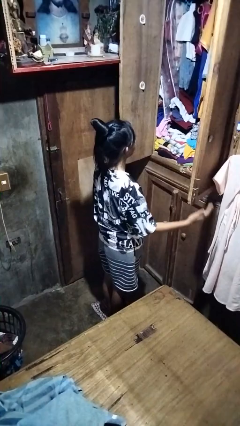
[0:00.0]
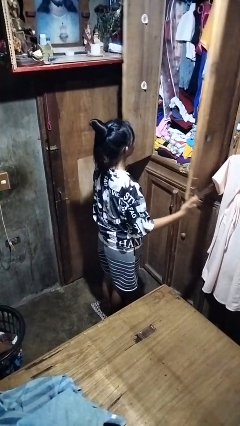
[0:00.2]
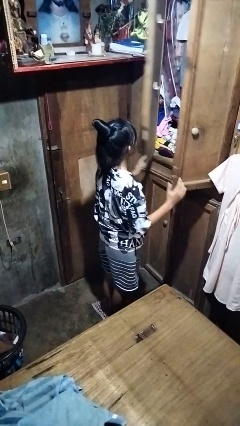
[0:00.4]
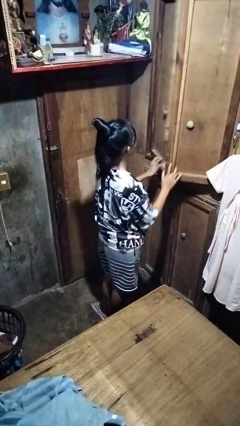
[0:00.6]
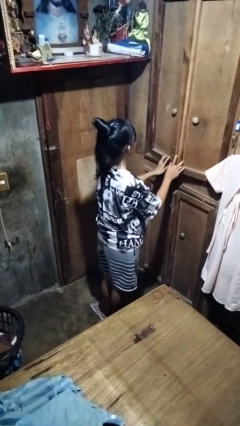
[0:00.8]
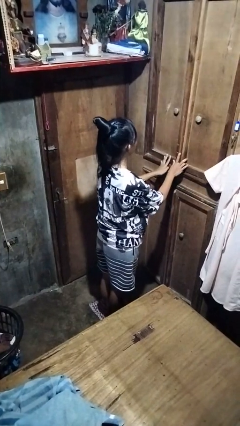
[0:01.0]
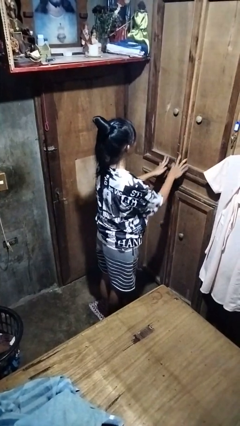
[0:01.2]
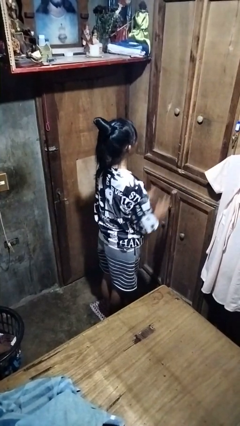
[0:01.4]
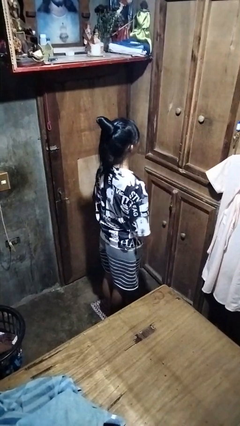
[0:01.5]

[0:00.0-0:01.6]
person closes closet door

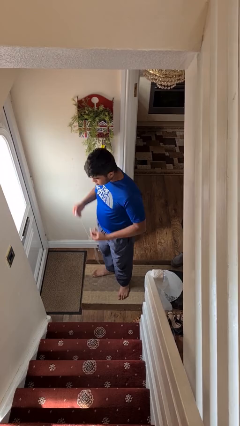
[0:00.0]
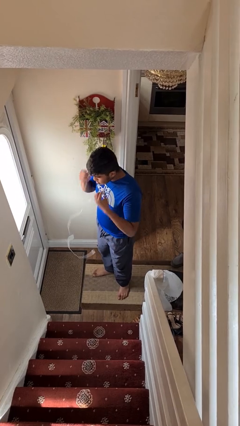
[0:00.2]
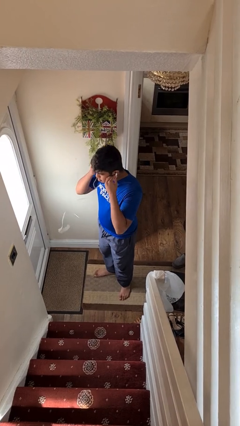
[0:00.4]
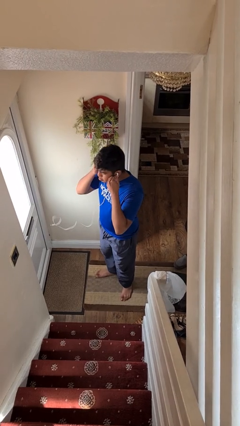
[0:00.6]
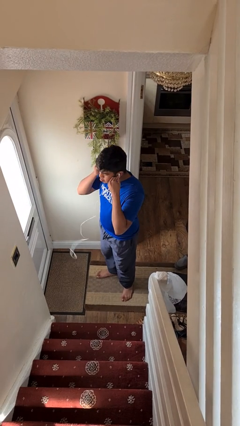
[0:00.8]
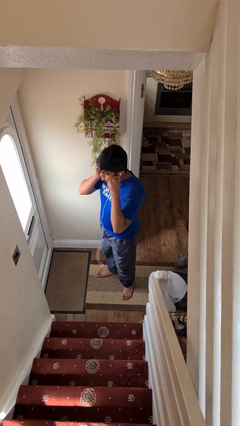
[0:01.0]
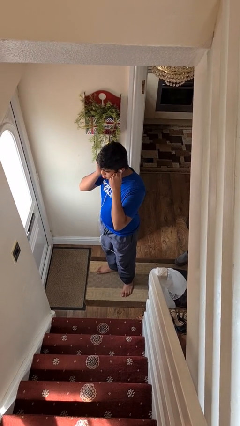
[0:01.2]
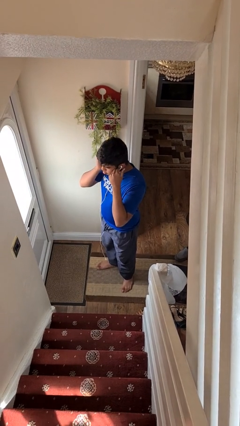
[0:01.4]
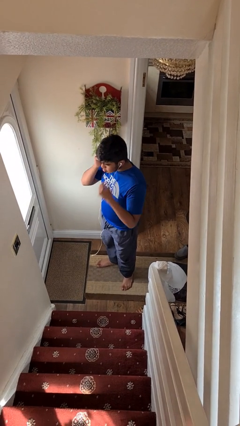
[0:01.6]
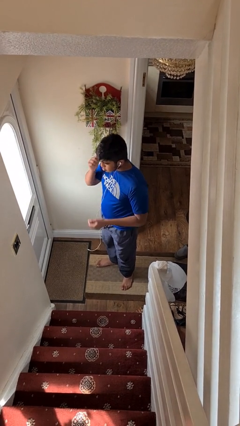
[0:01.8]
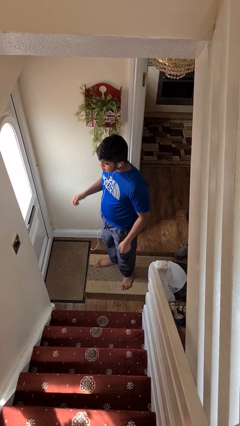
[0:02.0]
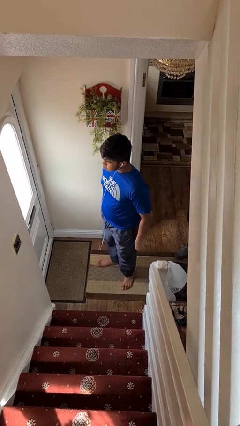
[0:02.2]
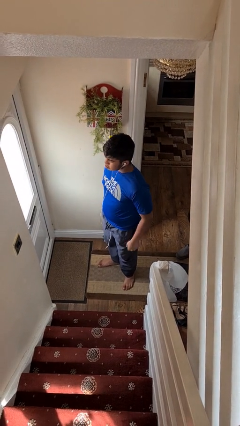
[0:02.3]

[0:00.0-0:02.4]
person puts on headphones

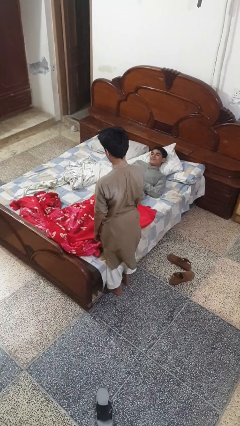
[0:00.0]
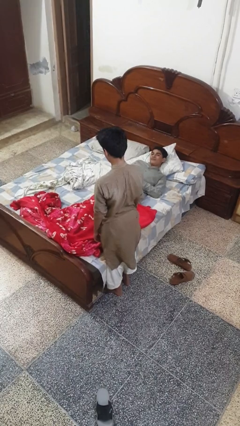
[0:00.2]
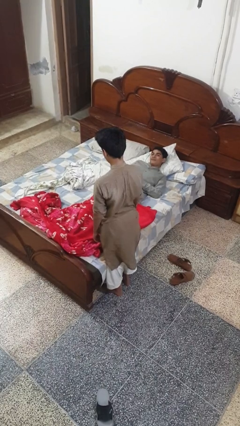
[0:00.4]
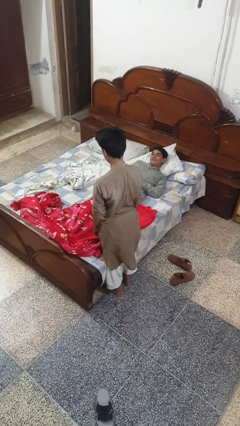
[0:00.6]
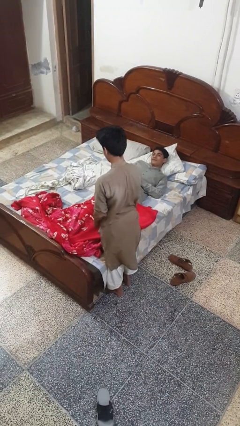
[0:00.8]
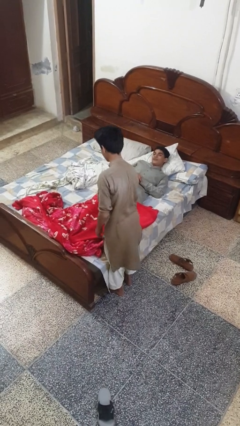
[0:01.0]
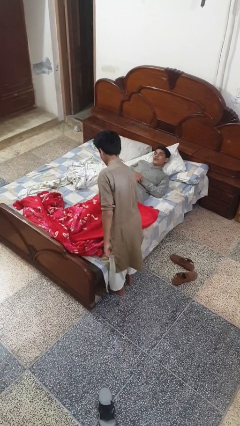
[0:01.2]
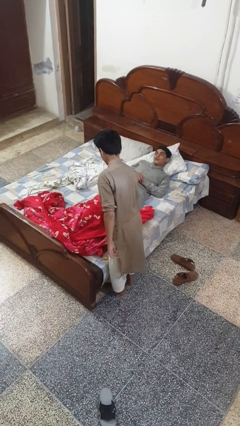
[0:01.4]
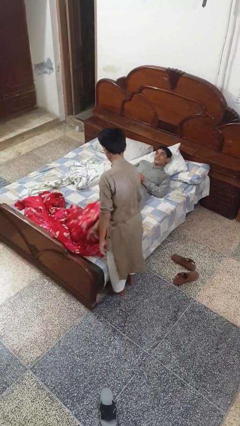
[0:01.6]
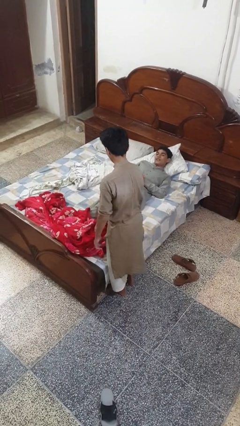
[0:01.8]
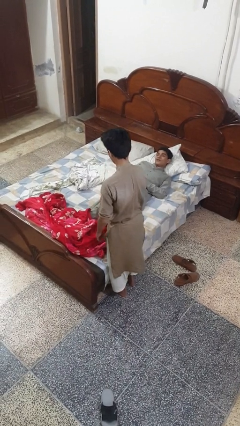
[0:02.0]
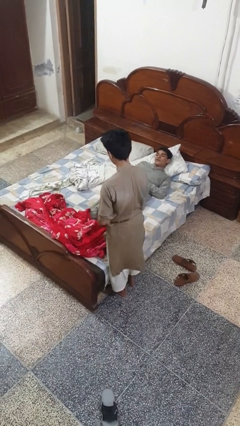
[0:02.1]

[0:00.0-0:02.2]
person uncovers friend with blanket

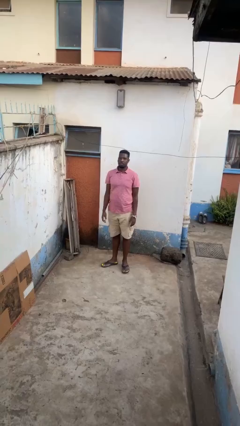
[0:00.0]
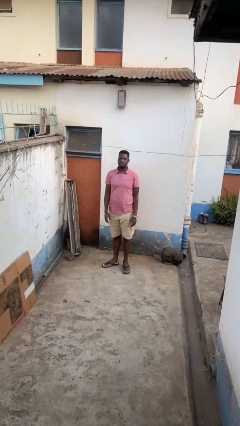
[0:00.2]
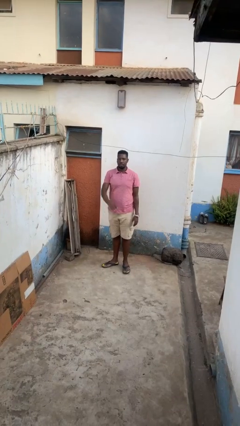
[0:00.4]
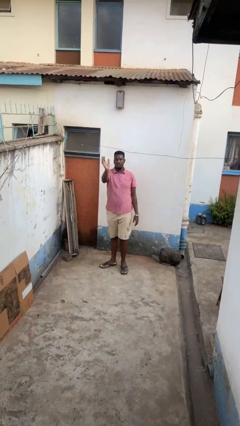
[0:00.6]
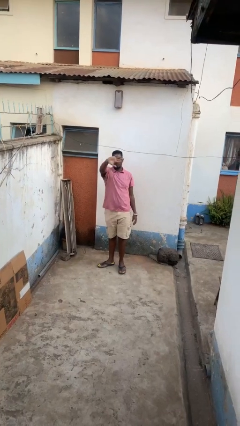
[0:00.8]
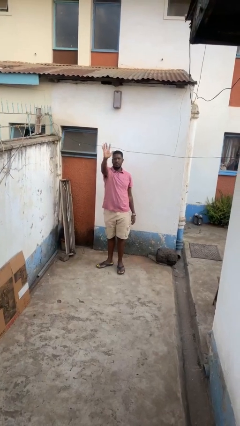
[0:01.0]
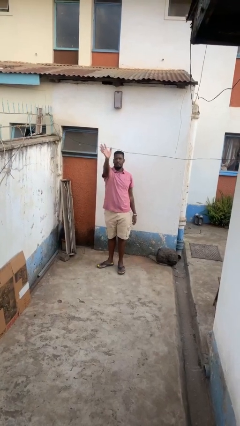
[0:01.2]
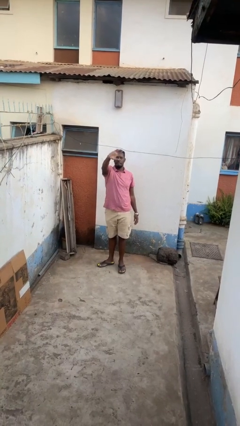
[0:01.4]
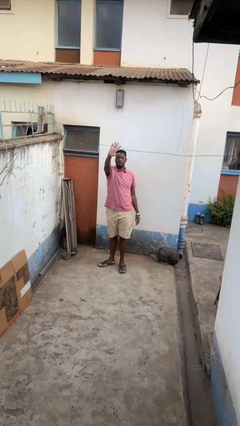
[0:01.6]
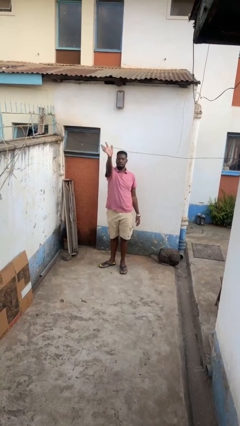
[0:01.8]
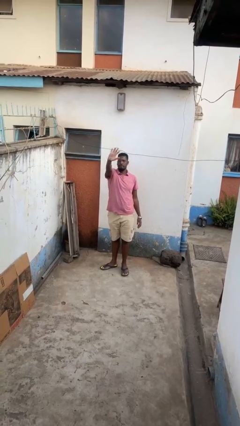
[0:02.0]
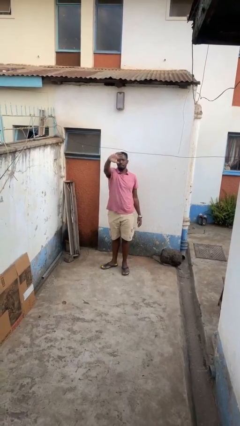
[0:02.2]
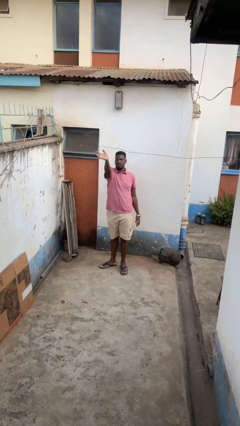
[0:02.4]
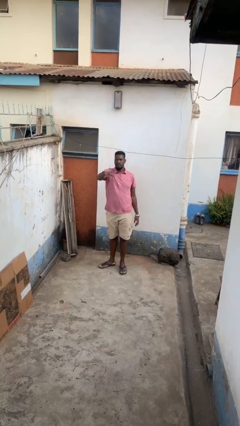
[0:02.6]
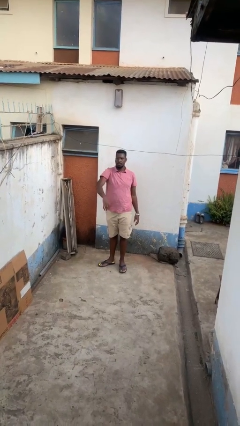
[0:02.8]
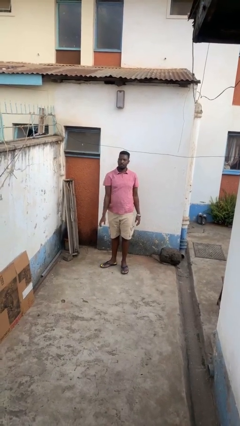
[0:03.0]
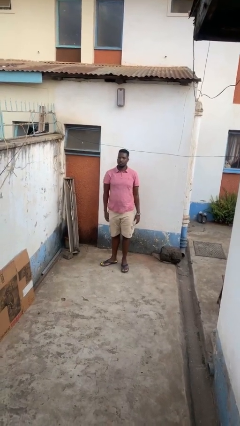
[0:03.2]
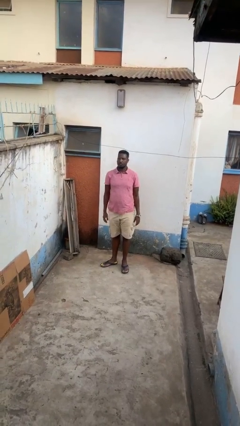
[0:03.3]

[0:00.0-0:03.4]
person waves at person

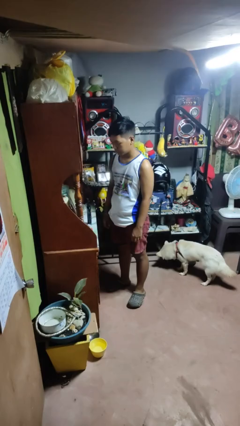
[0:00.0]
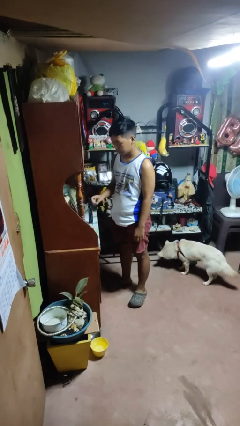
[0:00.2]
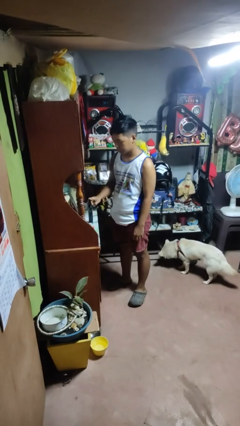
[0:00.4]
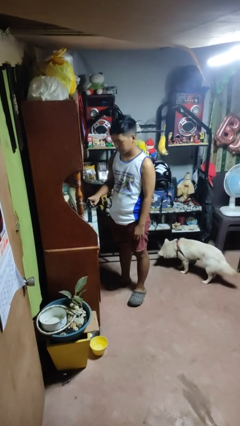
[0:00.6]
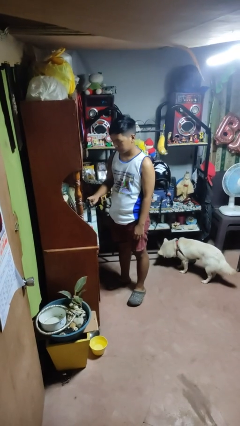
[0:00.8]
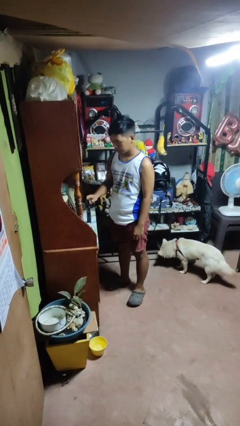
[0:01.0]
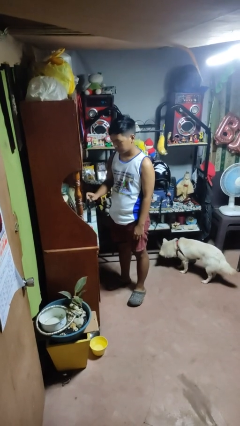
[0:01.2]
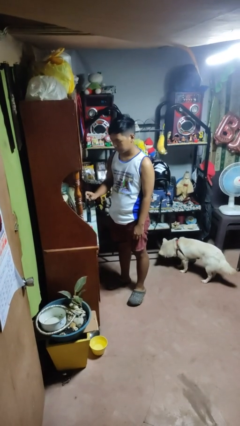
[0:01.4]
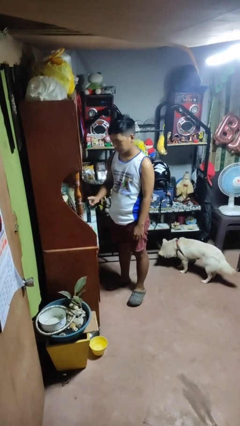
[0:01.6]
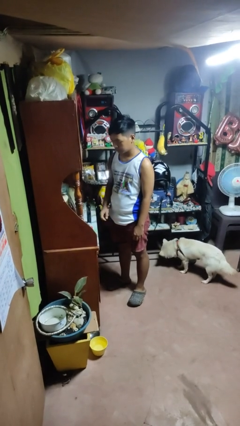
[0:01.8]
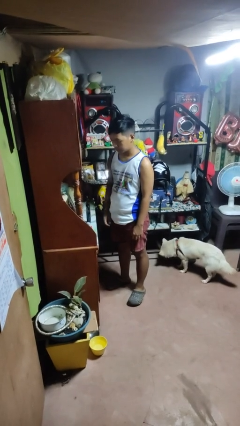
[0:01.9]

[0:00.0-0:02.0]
person taps object with finger

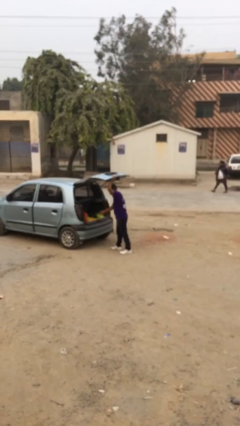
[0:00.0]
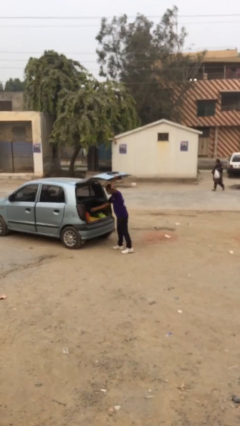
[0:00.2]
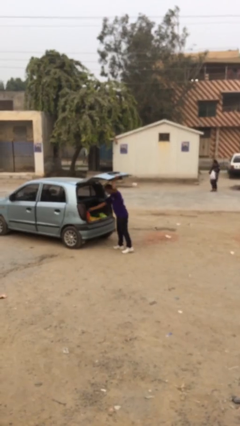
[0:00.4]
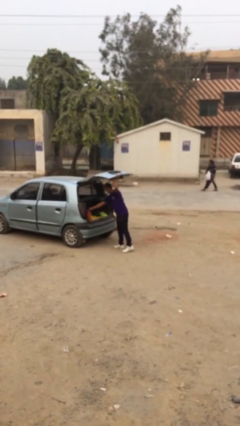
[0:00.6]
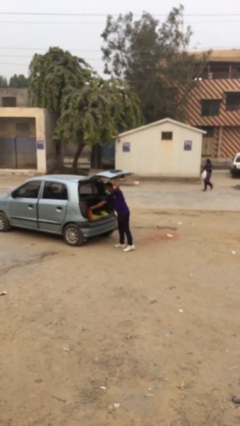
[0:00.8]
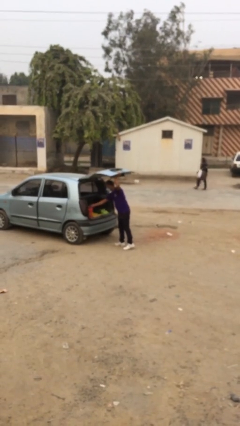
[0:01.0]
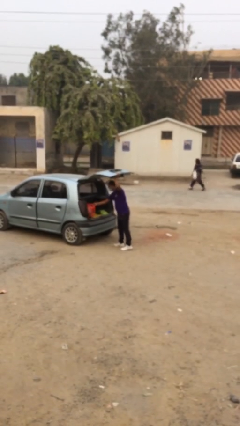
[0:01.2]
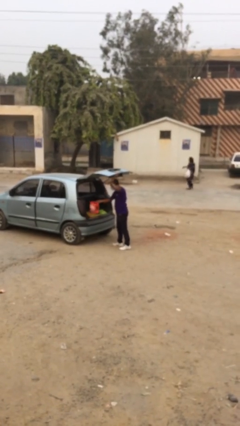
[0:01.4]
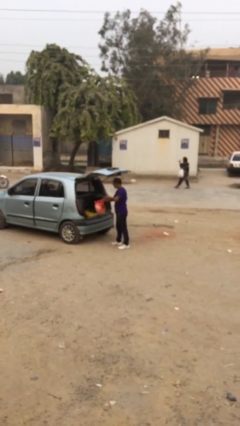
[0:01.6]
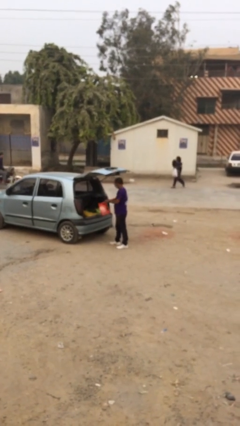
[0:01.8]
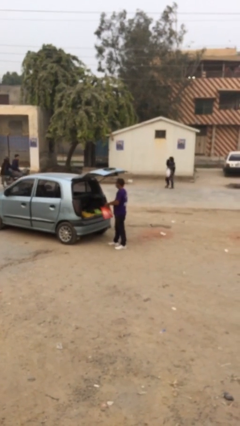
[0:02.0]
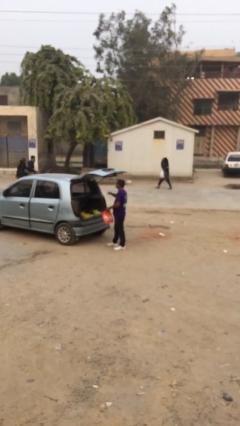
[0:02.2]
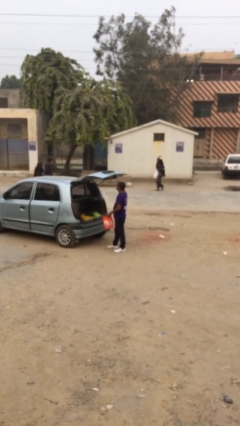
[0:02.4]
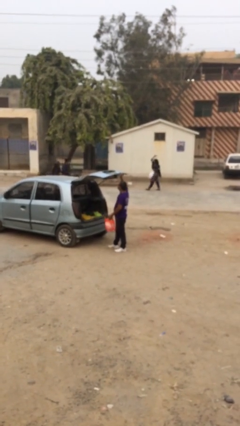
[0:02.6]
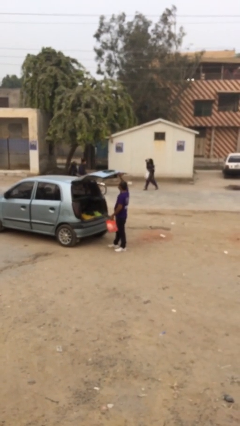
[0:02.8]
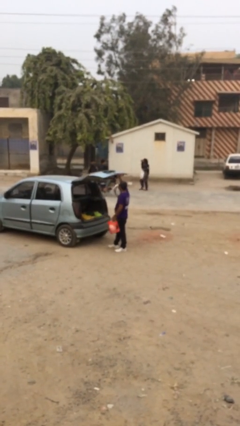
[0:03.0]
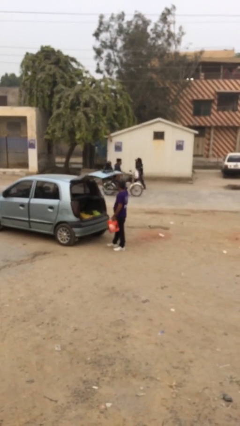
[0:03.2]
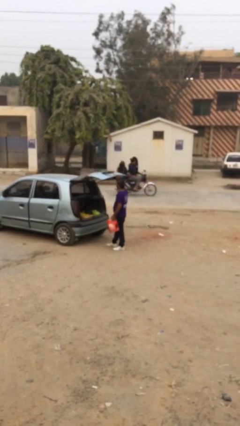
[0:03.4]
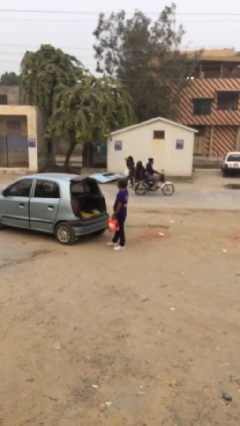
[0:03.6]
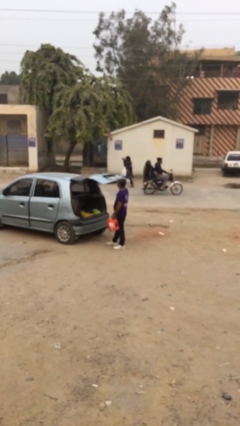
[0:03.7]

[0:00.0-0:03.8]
person unloads car

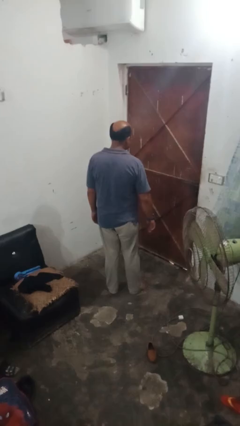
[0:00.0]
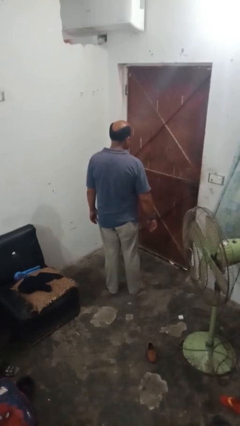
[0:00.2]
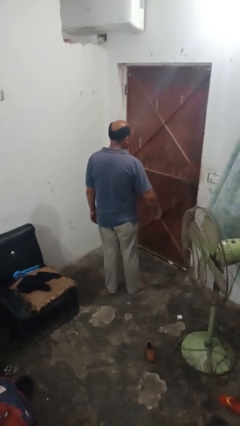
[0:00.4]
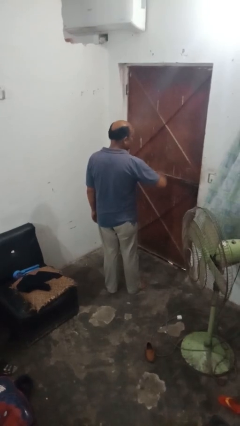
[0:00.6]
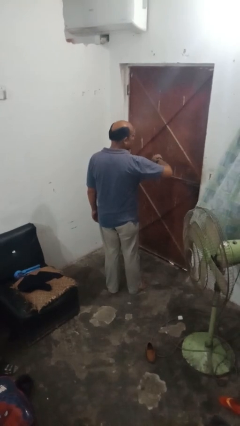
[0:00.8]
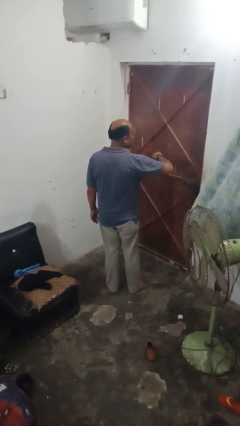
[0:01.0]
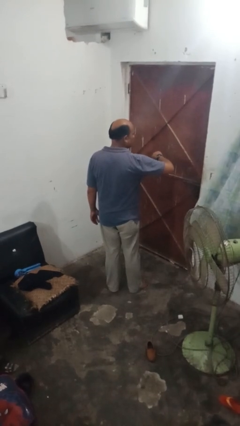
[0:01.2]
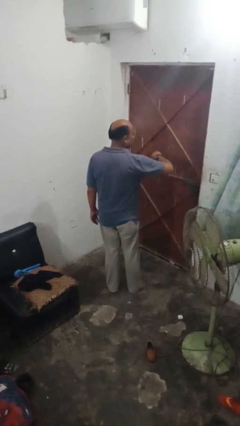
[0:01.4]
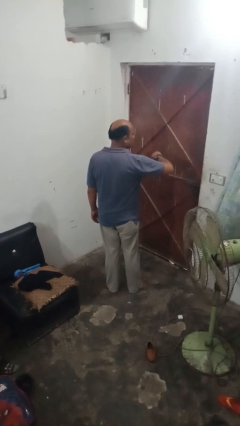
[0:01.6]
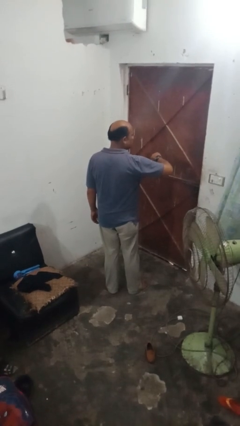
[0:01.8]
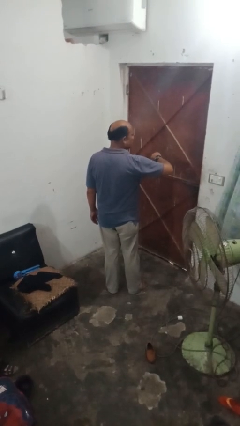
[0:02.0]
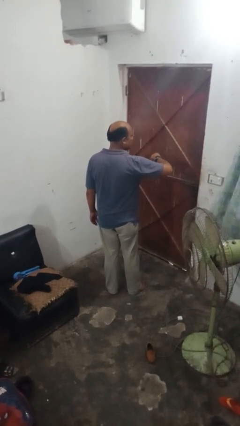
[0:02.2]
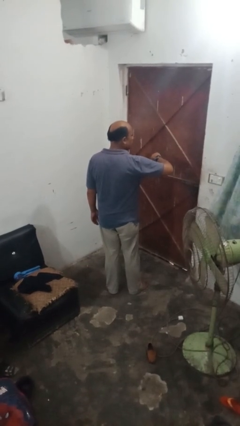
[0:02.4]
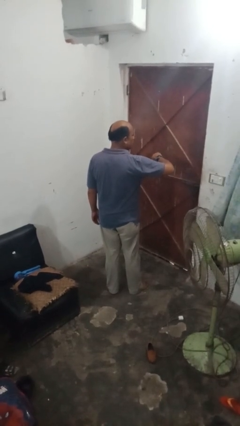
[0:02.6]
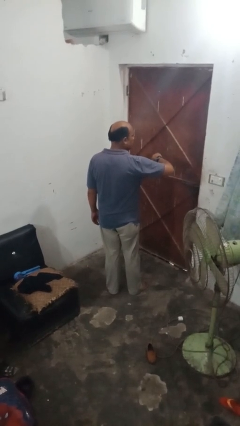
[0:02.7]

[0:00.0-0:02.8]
person puts on wristwatch
